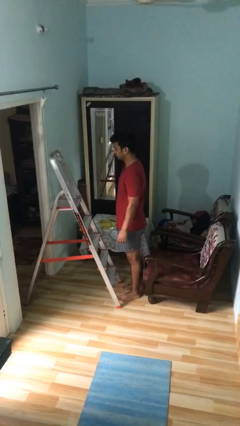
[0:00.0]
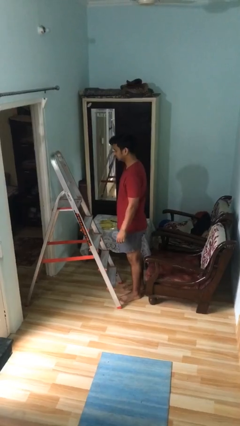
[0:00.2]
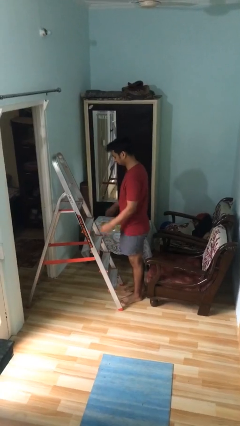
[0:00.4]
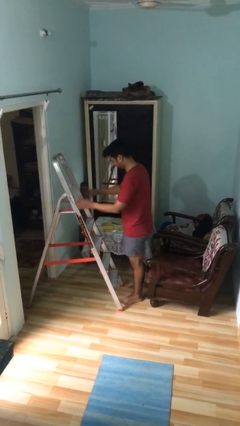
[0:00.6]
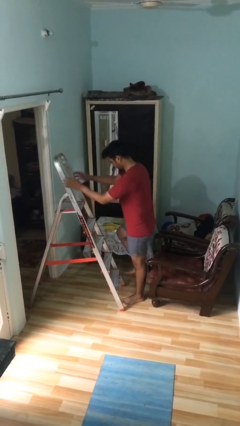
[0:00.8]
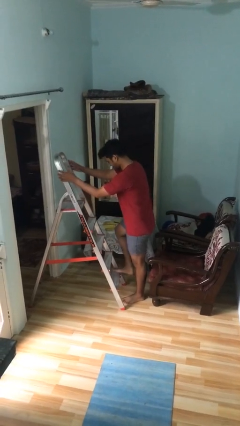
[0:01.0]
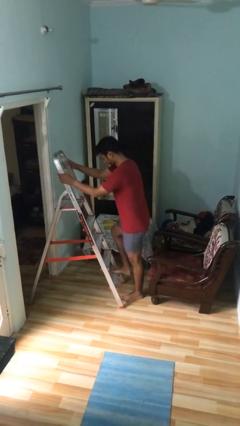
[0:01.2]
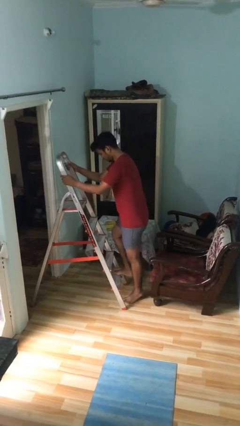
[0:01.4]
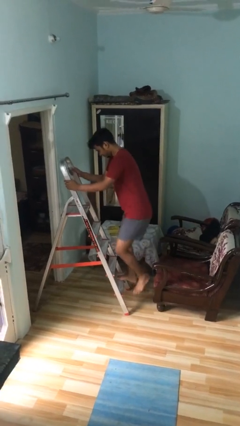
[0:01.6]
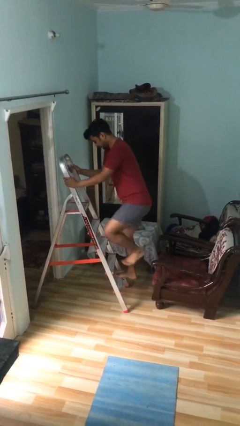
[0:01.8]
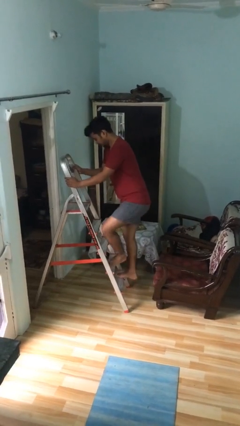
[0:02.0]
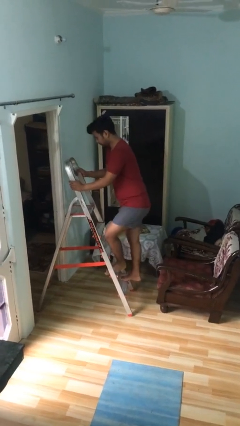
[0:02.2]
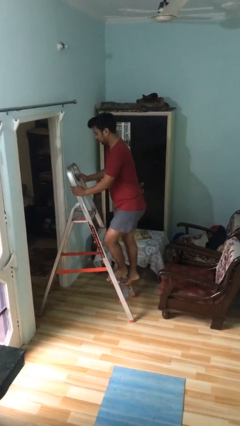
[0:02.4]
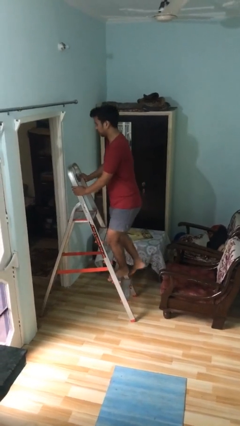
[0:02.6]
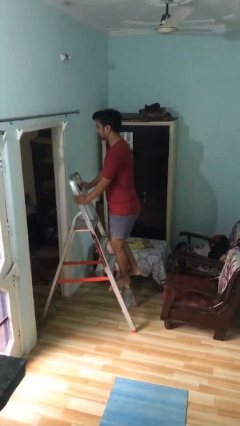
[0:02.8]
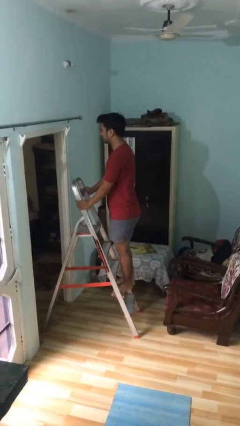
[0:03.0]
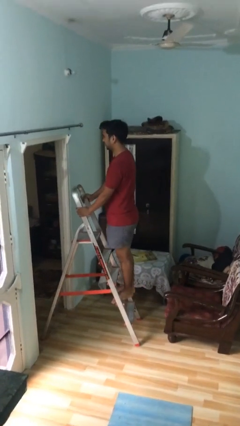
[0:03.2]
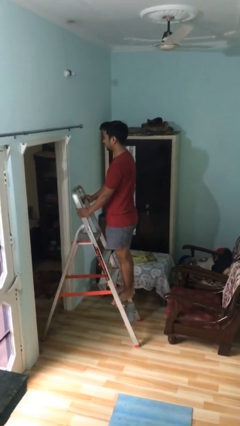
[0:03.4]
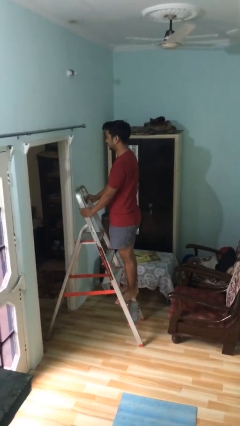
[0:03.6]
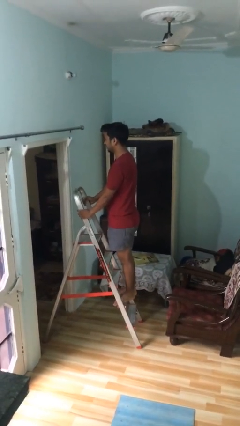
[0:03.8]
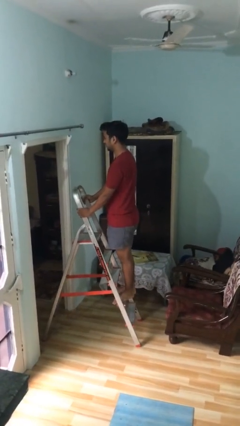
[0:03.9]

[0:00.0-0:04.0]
person climbs up ladder

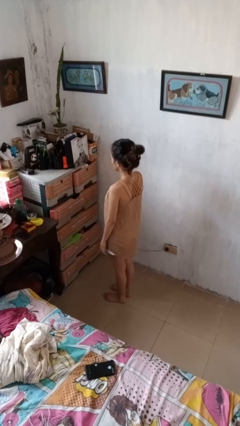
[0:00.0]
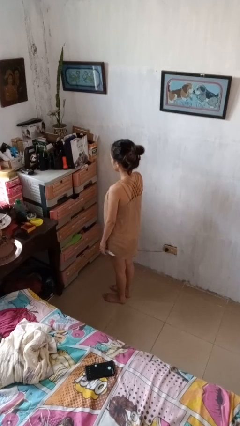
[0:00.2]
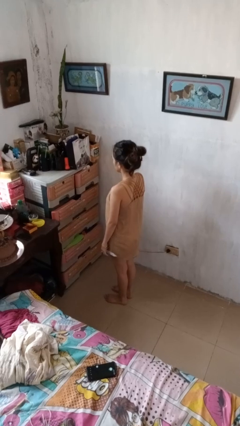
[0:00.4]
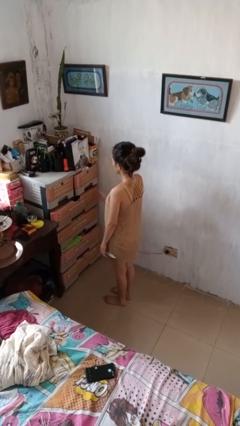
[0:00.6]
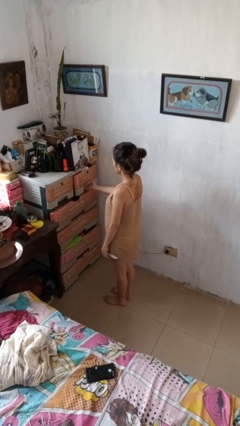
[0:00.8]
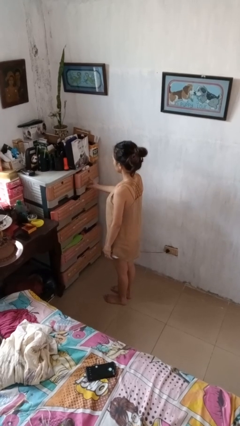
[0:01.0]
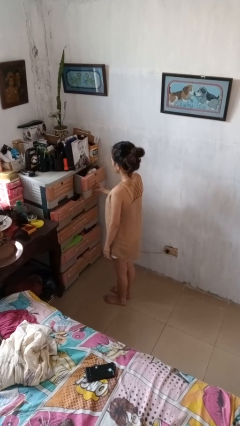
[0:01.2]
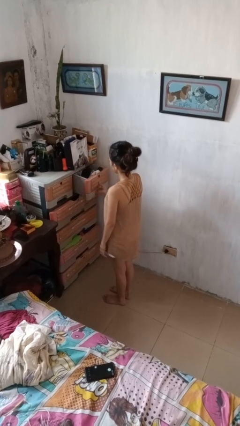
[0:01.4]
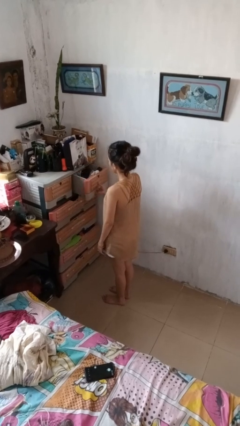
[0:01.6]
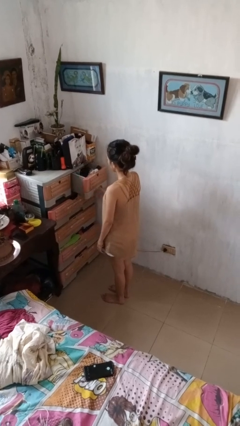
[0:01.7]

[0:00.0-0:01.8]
person opens dresser drawer

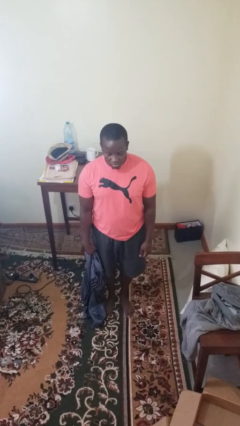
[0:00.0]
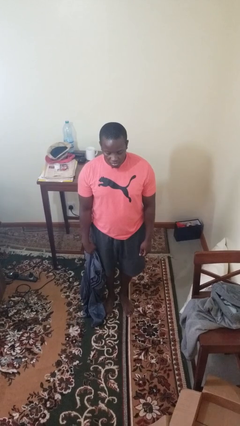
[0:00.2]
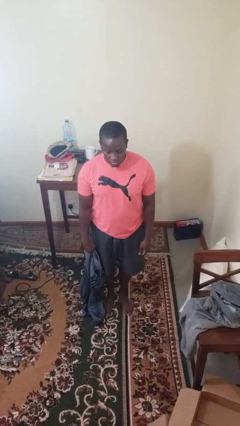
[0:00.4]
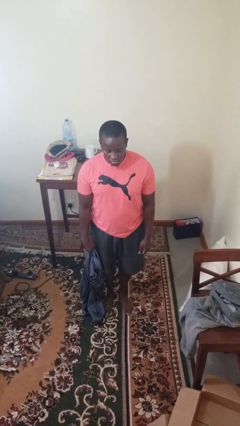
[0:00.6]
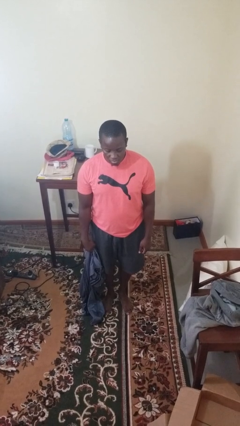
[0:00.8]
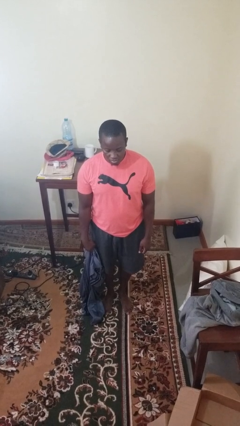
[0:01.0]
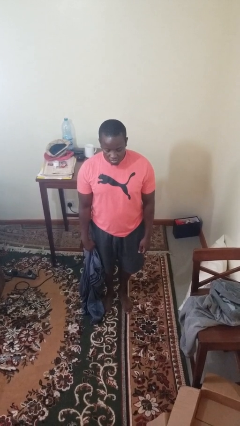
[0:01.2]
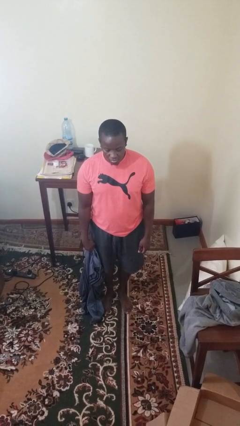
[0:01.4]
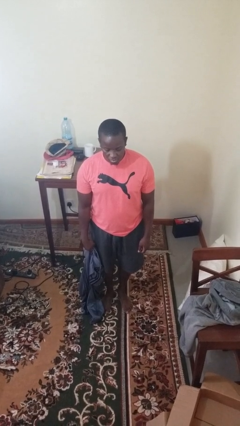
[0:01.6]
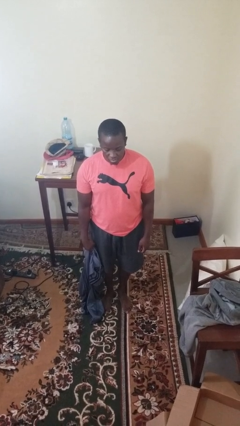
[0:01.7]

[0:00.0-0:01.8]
person takes off pants

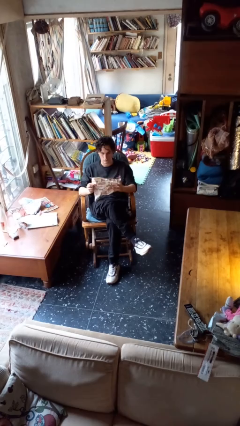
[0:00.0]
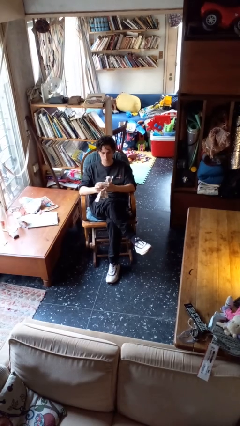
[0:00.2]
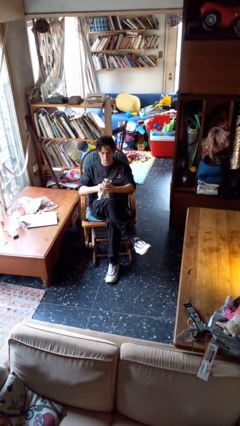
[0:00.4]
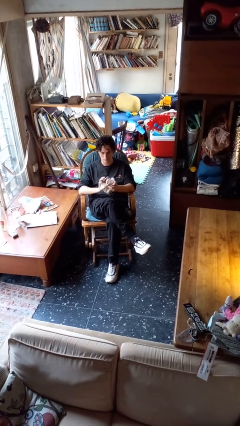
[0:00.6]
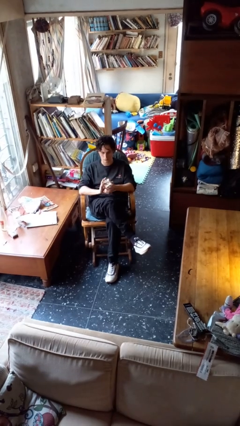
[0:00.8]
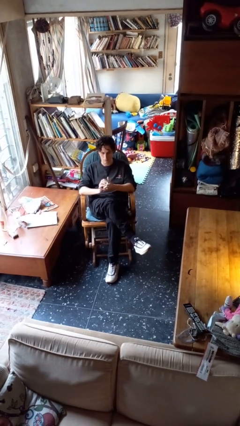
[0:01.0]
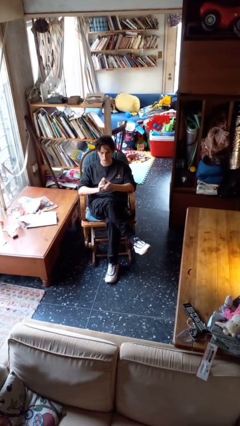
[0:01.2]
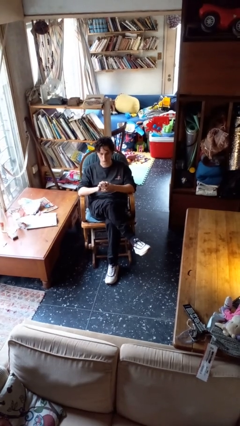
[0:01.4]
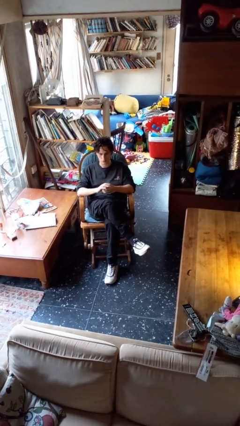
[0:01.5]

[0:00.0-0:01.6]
person crumples paper

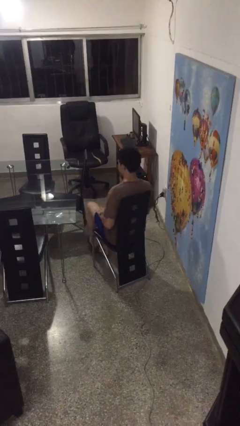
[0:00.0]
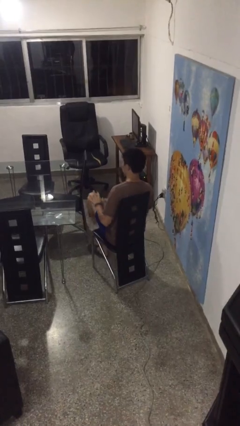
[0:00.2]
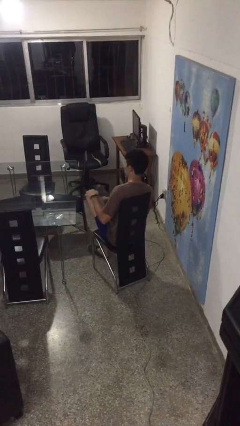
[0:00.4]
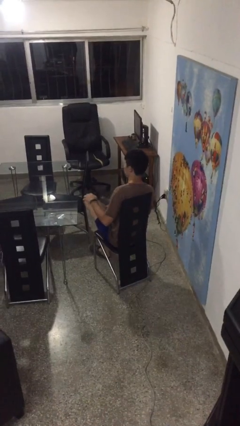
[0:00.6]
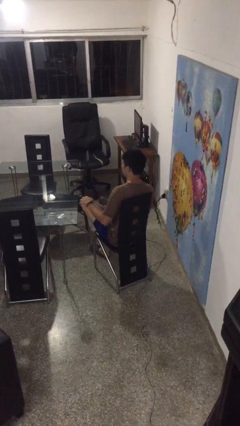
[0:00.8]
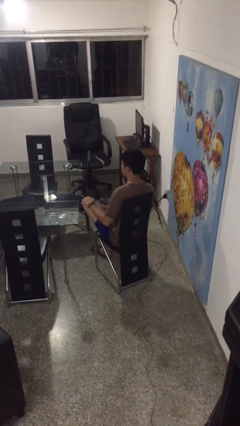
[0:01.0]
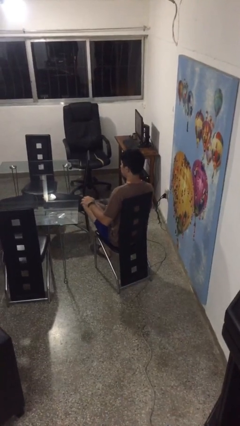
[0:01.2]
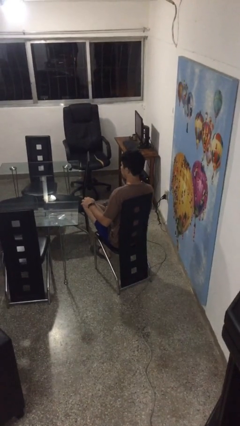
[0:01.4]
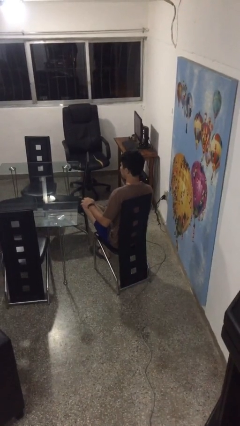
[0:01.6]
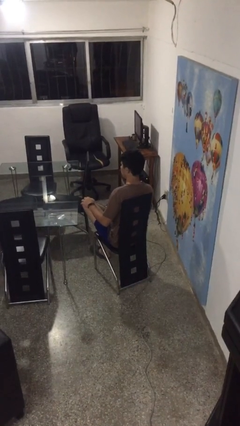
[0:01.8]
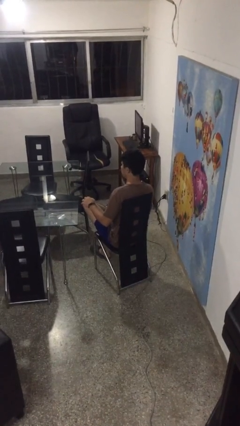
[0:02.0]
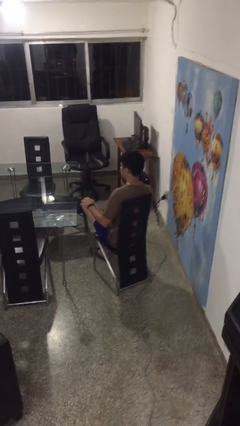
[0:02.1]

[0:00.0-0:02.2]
person crosses legs

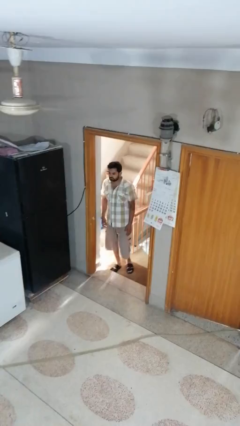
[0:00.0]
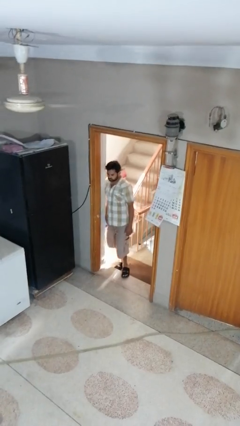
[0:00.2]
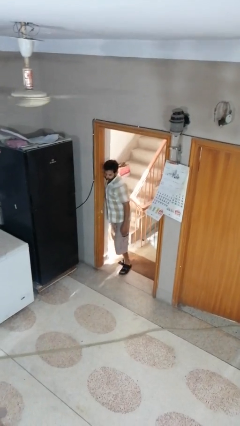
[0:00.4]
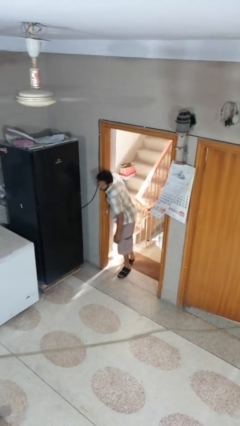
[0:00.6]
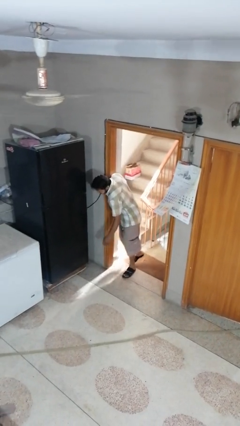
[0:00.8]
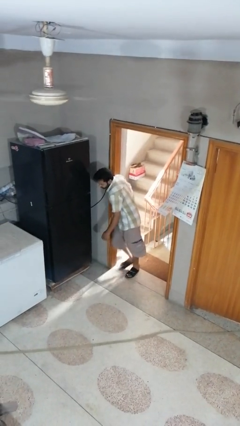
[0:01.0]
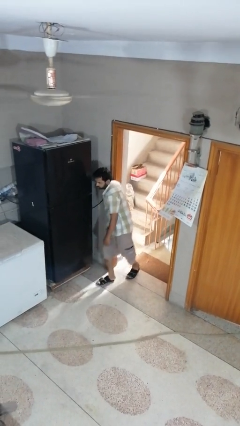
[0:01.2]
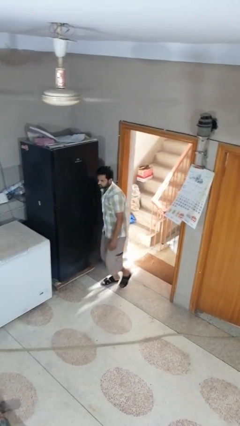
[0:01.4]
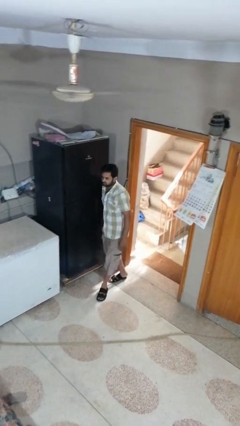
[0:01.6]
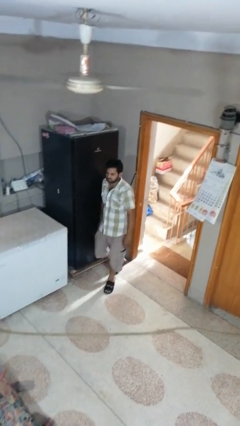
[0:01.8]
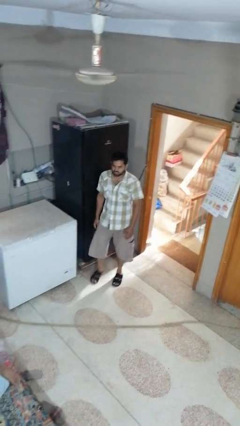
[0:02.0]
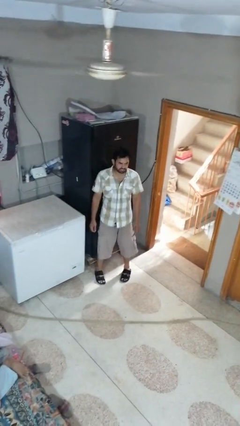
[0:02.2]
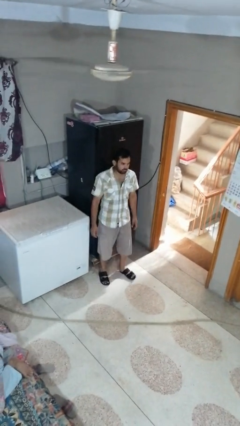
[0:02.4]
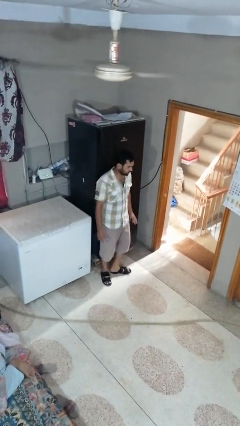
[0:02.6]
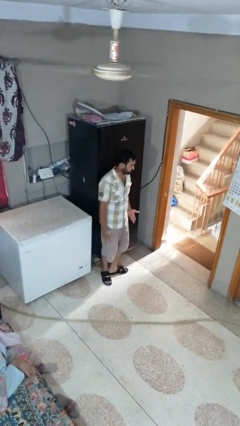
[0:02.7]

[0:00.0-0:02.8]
person bumps into wall

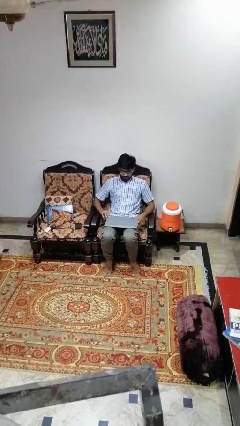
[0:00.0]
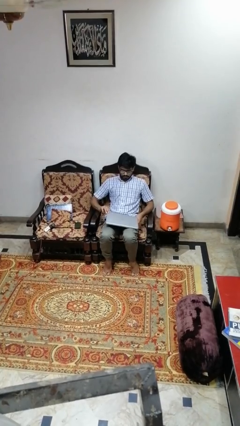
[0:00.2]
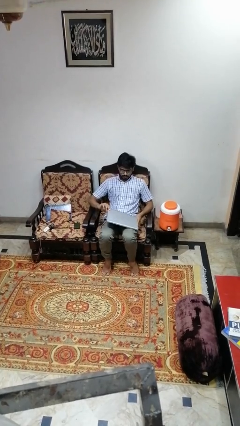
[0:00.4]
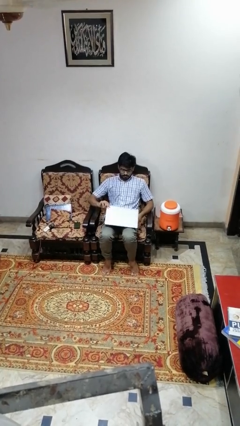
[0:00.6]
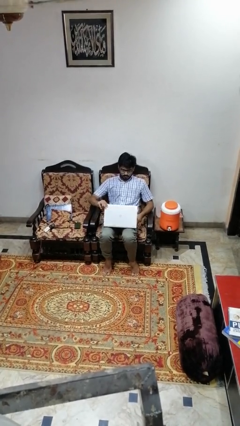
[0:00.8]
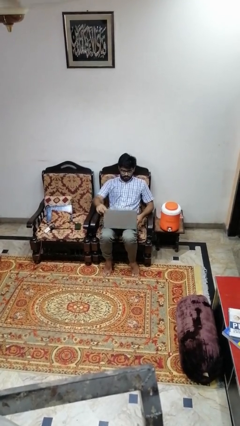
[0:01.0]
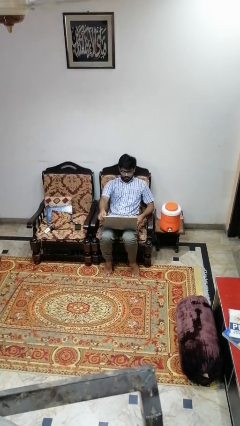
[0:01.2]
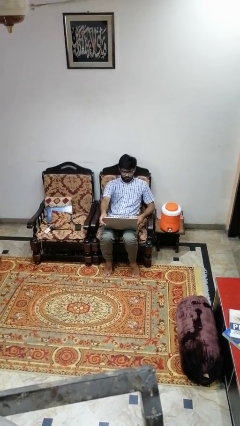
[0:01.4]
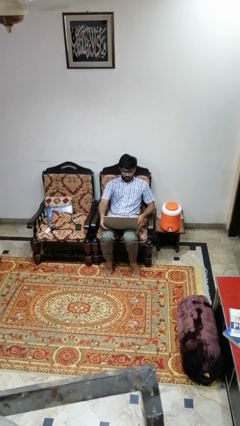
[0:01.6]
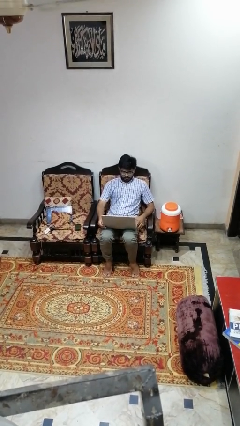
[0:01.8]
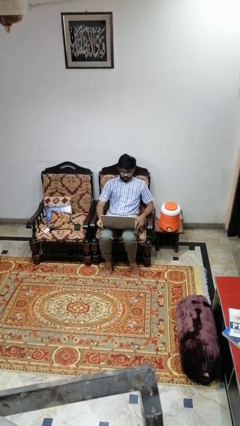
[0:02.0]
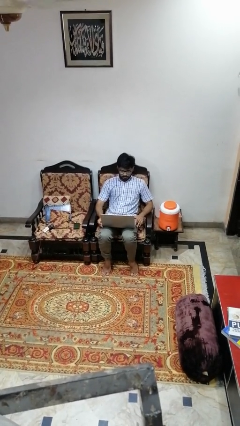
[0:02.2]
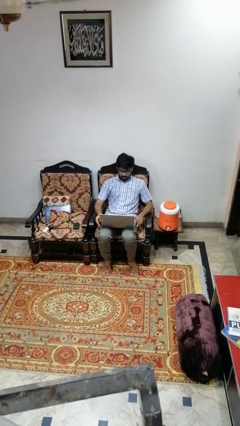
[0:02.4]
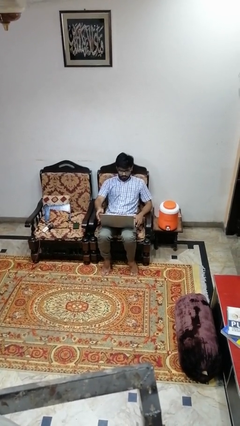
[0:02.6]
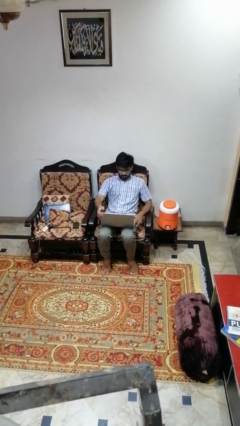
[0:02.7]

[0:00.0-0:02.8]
person opens laptop
